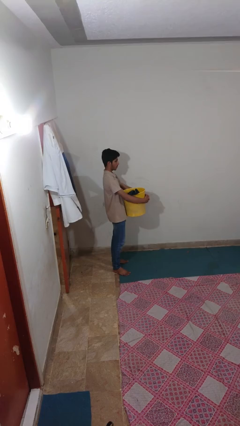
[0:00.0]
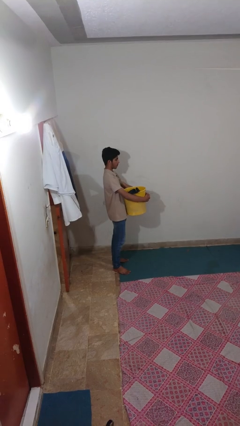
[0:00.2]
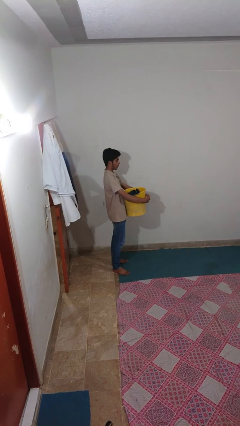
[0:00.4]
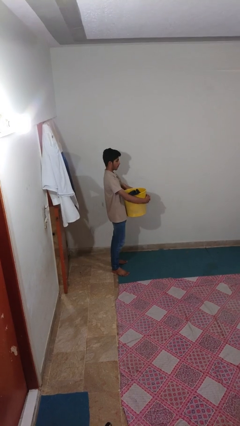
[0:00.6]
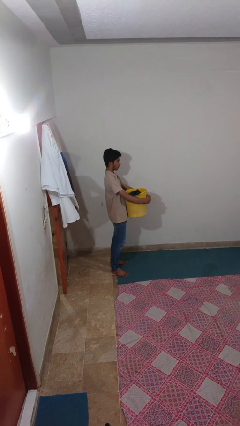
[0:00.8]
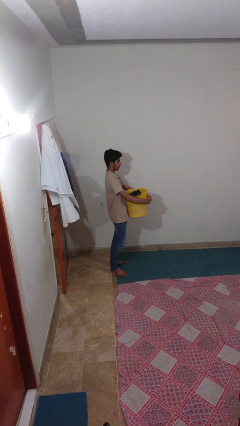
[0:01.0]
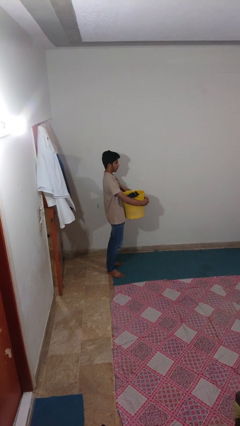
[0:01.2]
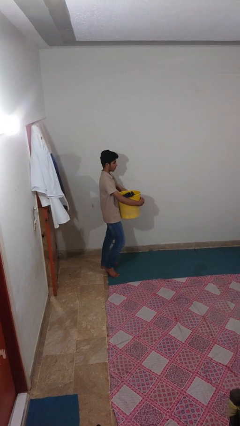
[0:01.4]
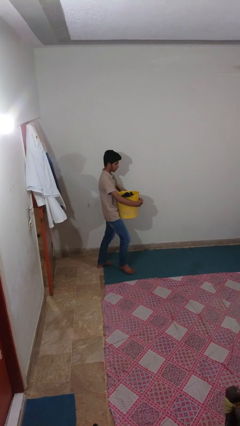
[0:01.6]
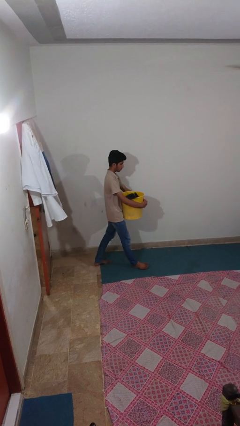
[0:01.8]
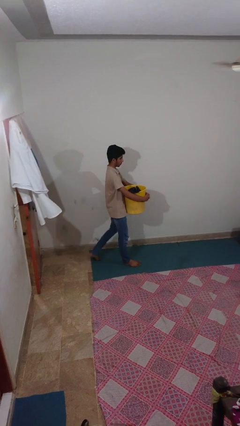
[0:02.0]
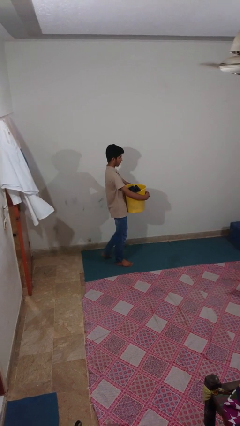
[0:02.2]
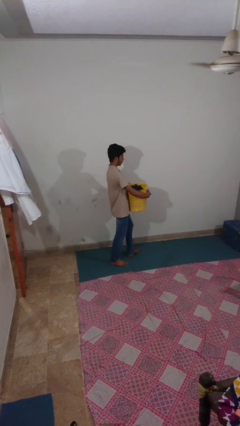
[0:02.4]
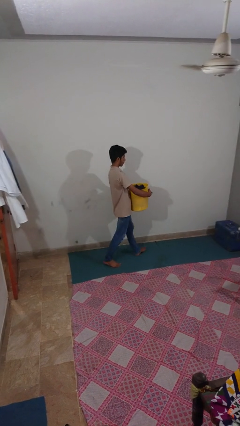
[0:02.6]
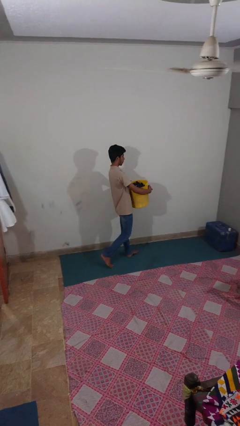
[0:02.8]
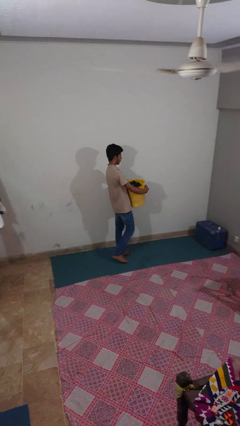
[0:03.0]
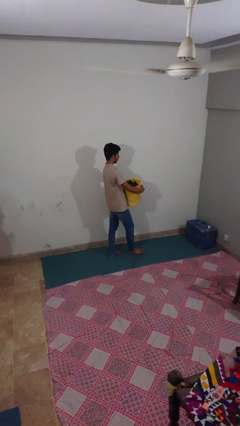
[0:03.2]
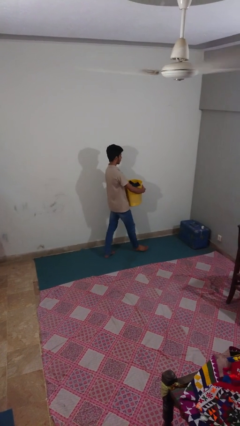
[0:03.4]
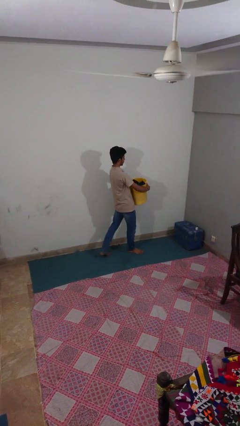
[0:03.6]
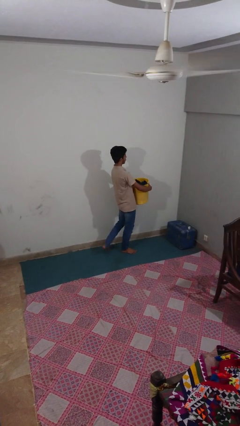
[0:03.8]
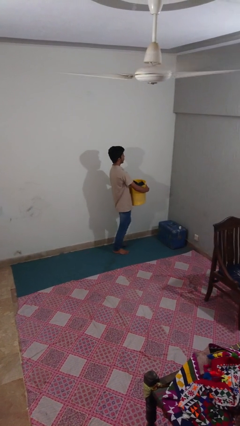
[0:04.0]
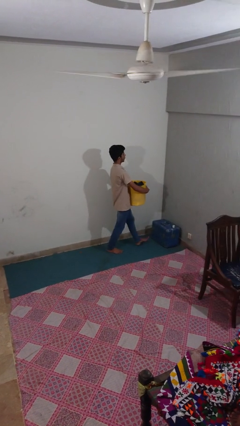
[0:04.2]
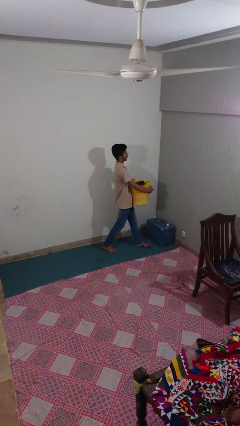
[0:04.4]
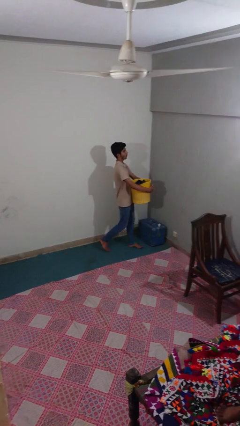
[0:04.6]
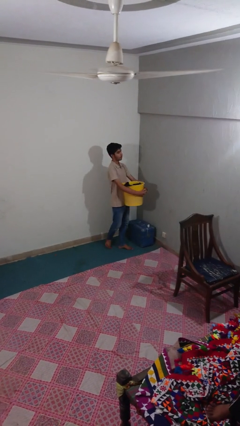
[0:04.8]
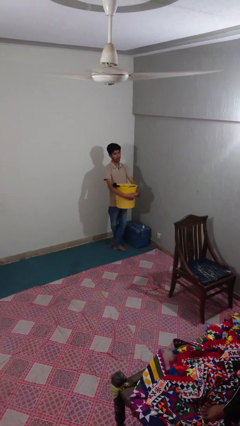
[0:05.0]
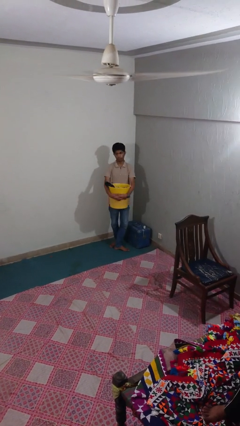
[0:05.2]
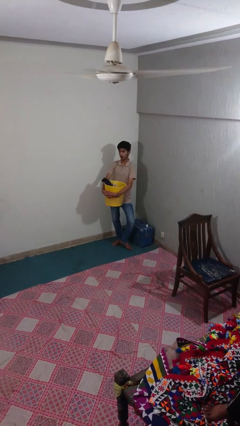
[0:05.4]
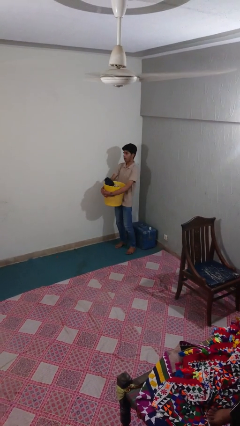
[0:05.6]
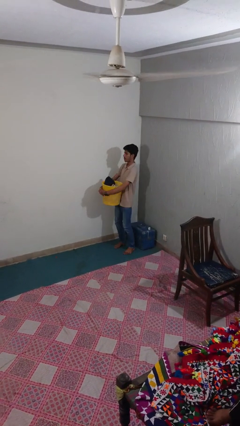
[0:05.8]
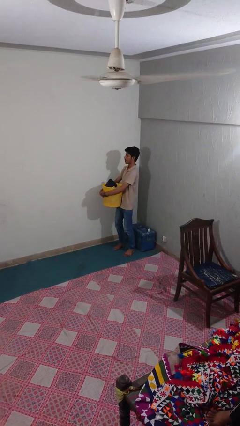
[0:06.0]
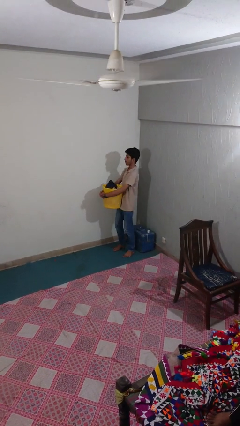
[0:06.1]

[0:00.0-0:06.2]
person carries laundry basket

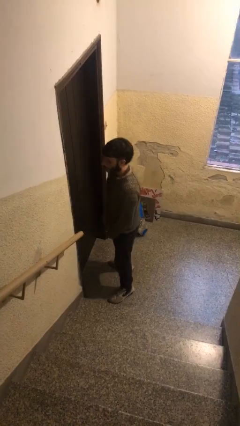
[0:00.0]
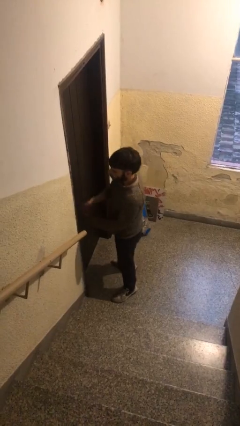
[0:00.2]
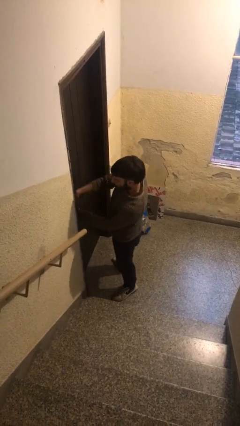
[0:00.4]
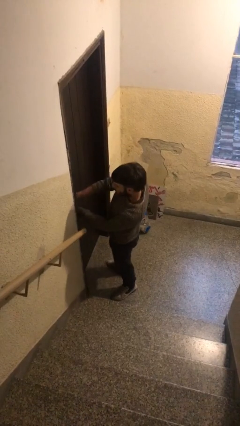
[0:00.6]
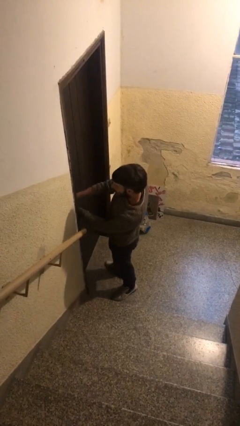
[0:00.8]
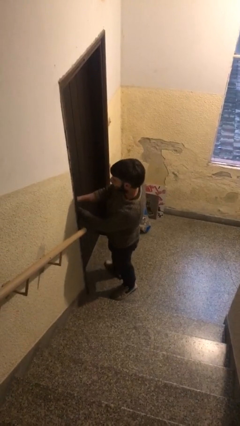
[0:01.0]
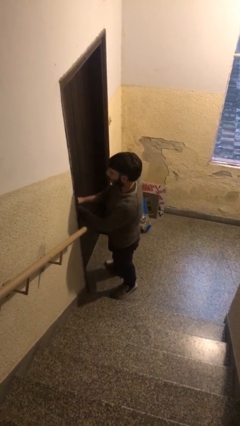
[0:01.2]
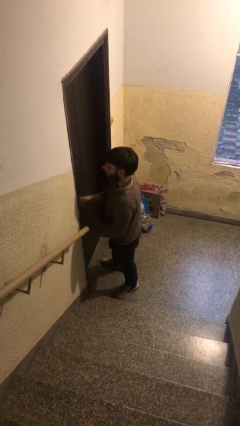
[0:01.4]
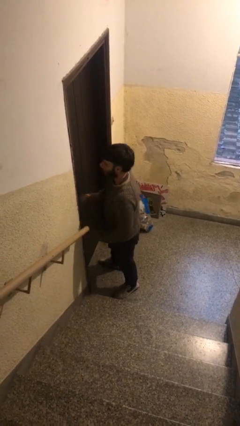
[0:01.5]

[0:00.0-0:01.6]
person unlocks door with keys

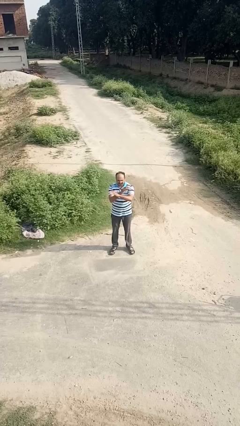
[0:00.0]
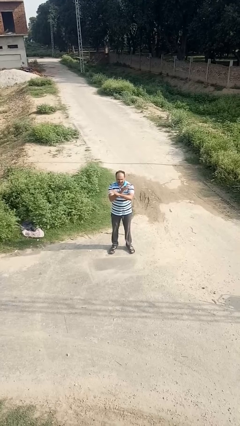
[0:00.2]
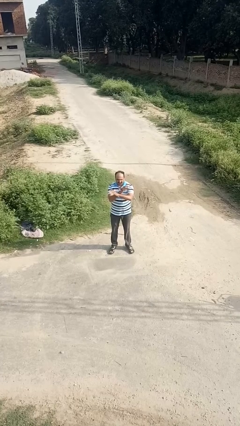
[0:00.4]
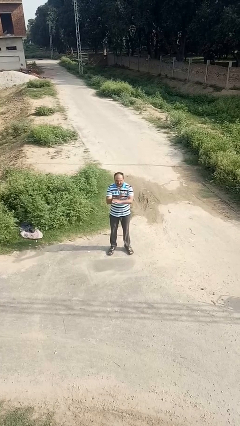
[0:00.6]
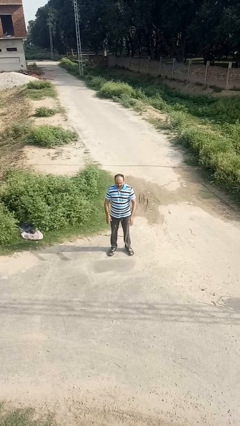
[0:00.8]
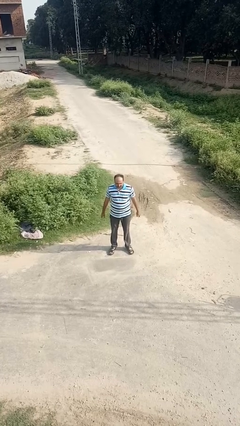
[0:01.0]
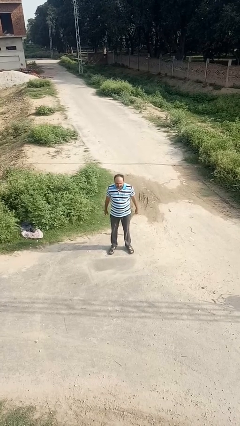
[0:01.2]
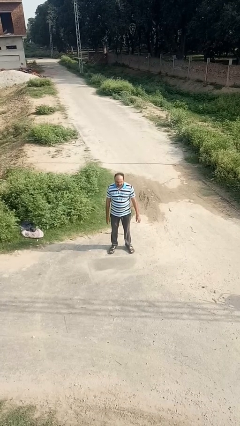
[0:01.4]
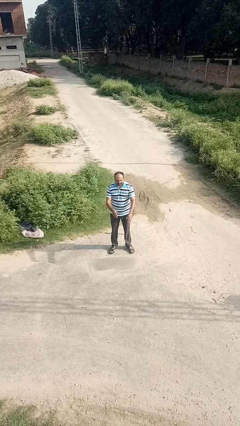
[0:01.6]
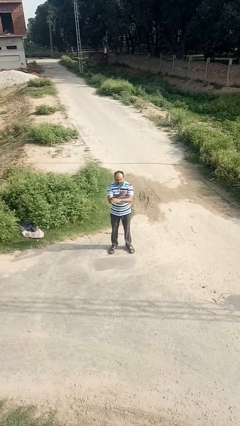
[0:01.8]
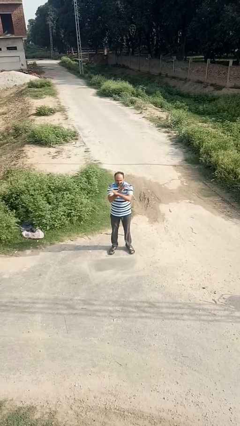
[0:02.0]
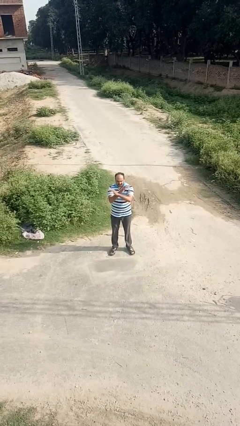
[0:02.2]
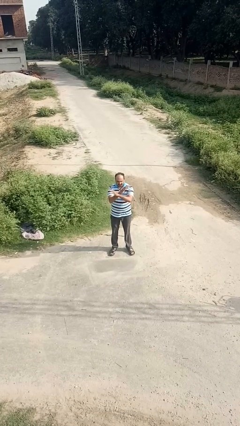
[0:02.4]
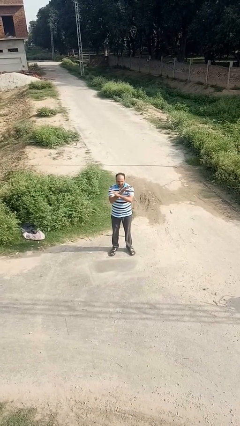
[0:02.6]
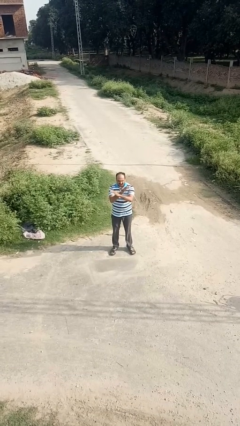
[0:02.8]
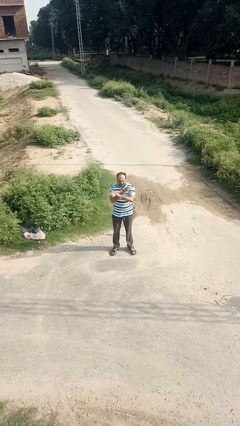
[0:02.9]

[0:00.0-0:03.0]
person crosses arms

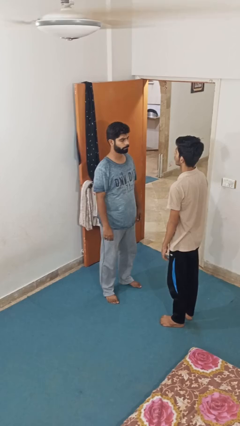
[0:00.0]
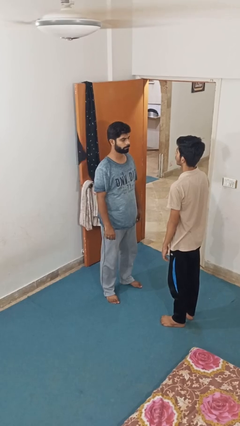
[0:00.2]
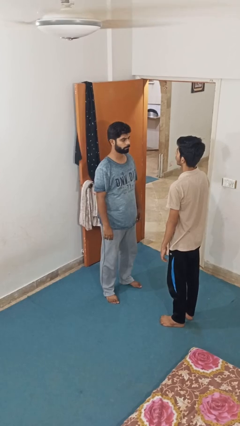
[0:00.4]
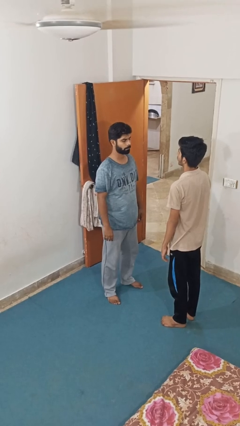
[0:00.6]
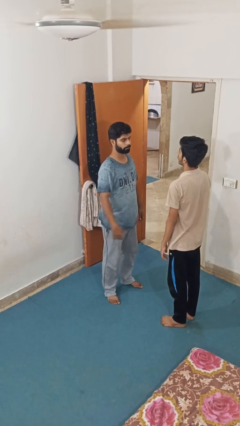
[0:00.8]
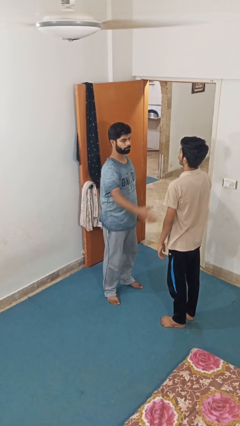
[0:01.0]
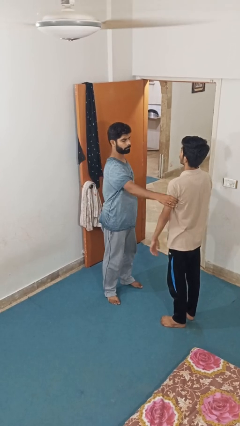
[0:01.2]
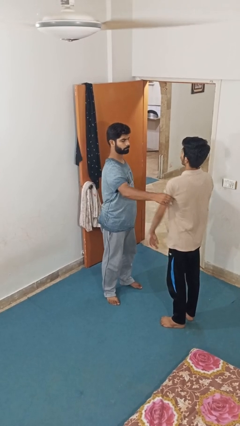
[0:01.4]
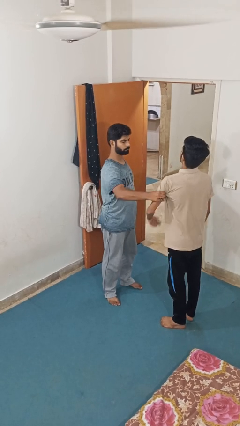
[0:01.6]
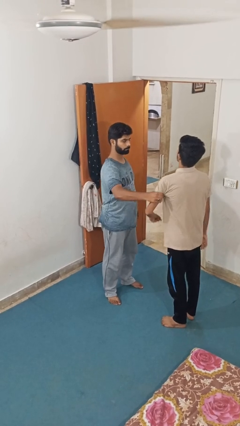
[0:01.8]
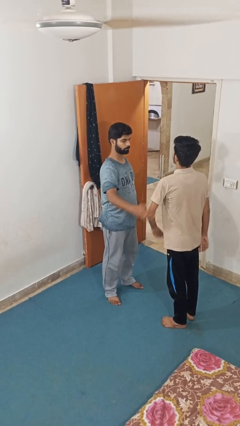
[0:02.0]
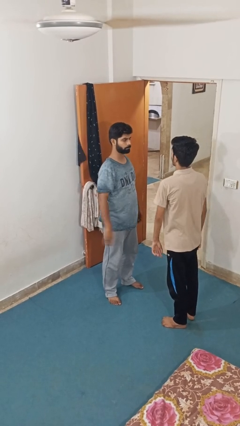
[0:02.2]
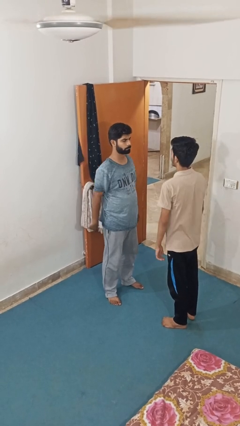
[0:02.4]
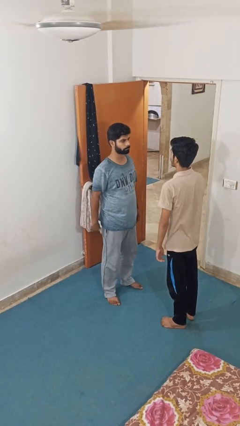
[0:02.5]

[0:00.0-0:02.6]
person grabs person by bicep

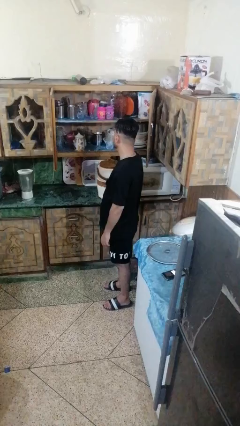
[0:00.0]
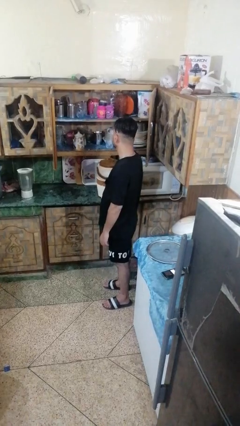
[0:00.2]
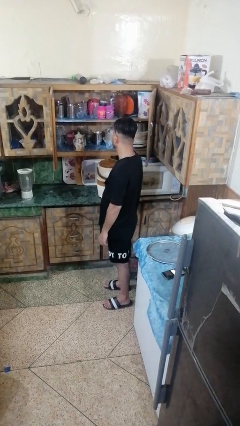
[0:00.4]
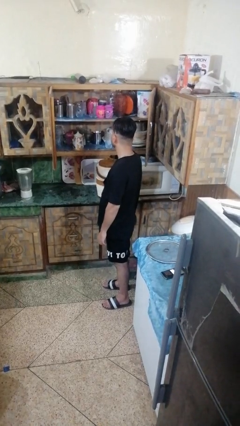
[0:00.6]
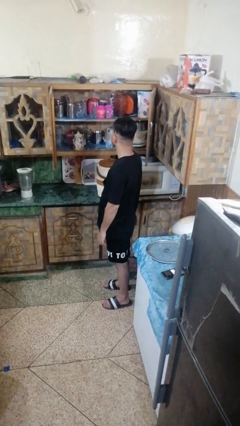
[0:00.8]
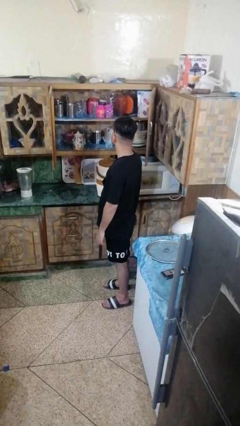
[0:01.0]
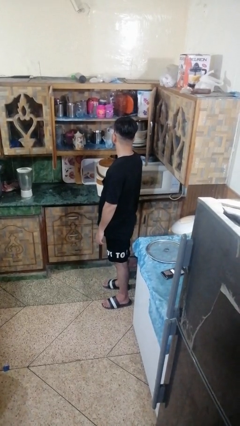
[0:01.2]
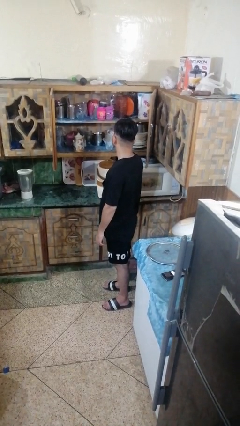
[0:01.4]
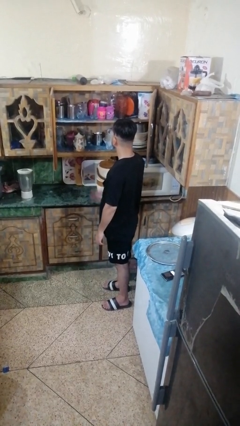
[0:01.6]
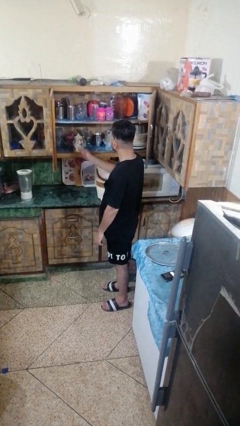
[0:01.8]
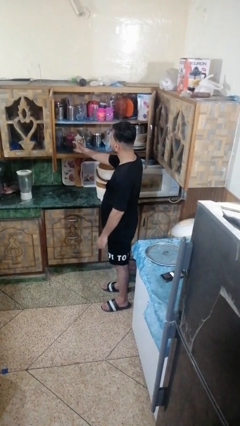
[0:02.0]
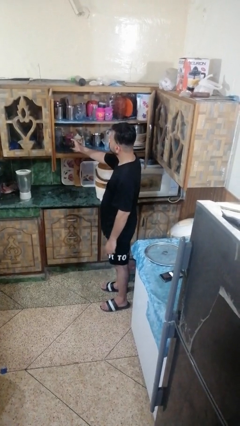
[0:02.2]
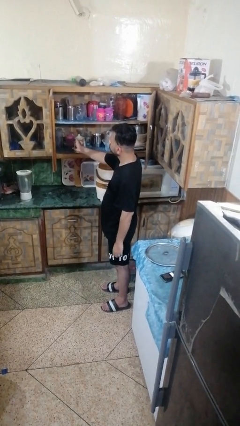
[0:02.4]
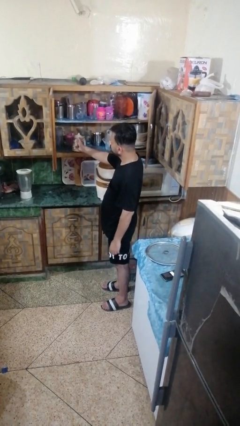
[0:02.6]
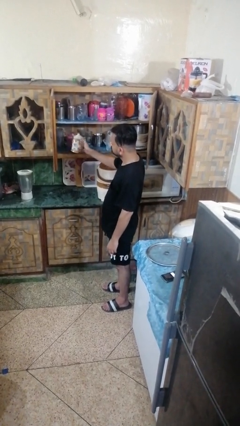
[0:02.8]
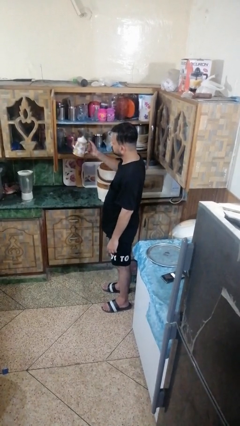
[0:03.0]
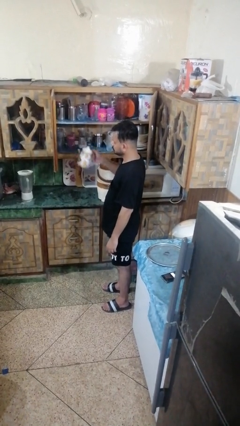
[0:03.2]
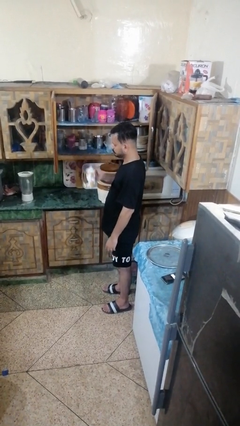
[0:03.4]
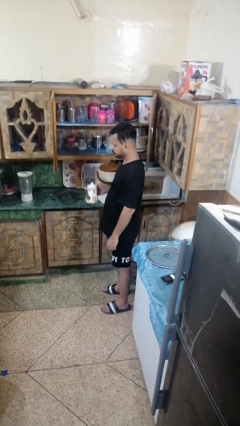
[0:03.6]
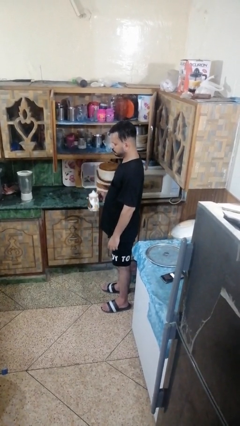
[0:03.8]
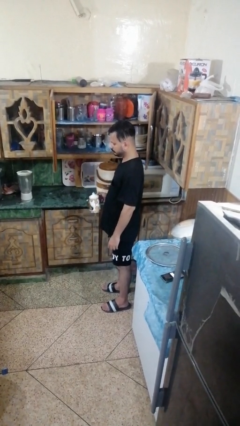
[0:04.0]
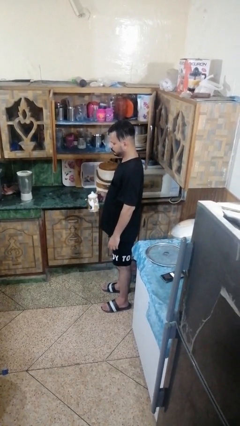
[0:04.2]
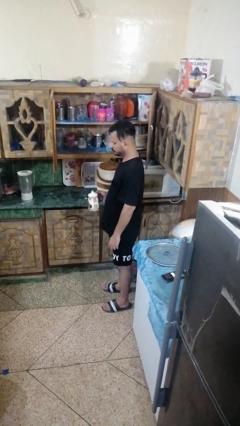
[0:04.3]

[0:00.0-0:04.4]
person picks up object from cabinet
